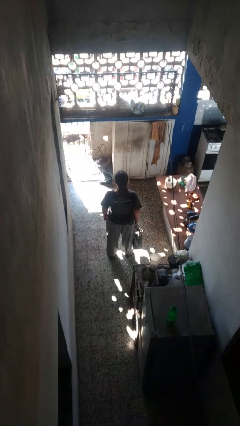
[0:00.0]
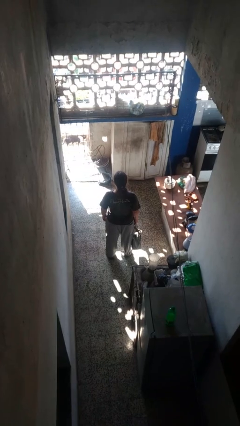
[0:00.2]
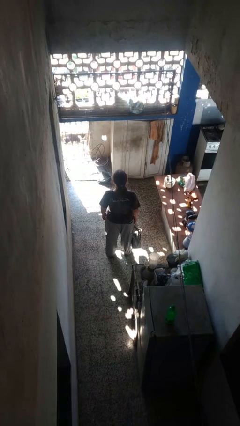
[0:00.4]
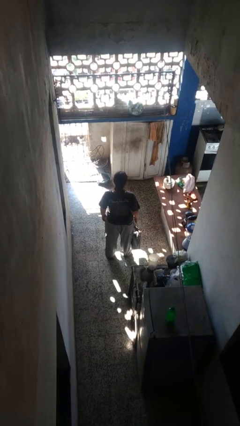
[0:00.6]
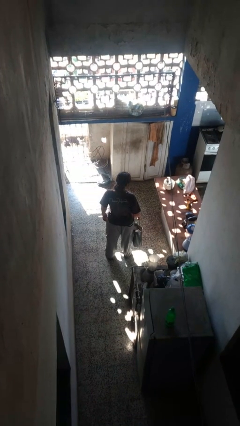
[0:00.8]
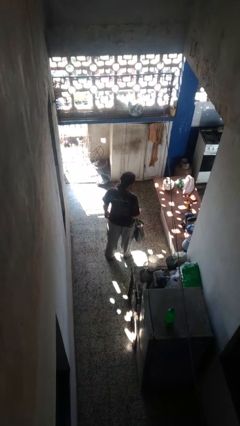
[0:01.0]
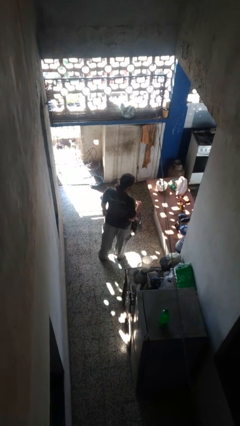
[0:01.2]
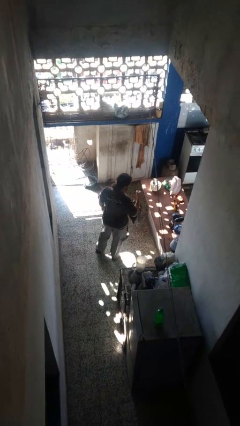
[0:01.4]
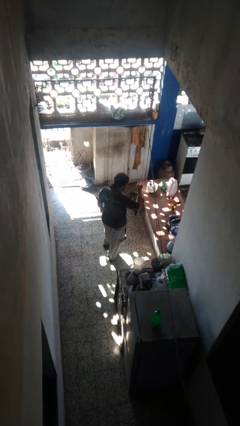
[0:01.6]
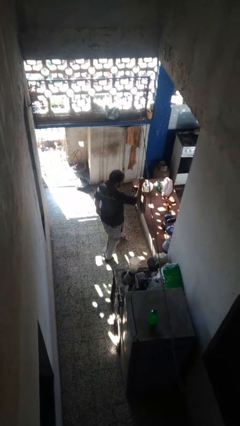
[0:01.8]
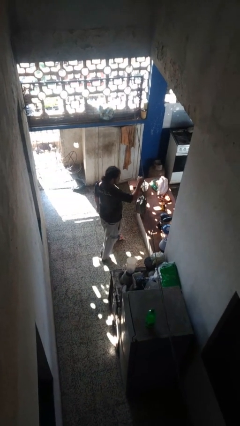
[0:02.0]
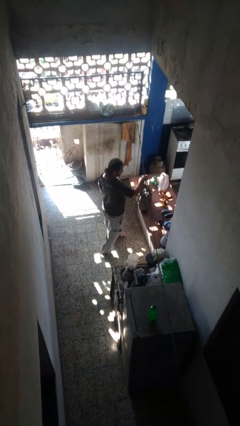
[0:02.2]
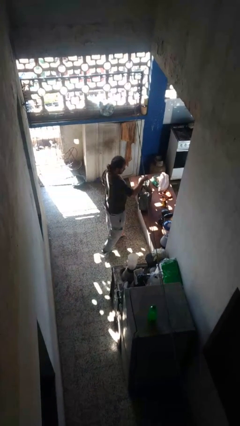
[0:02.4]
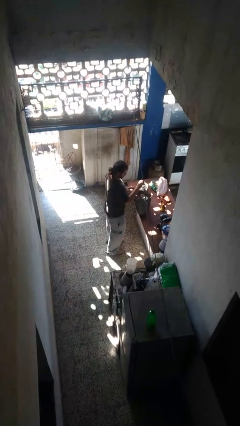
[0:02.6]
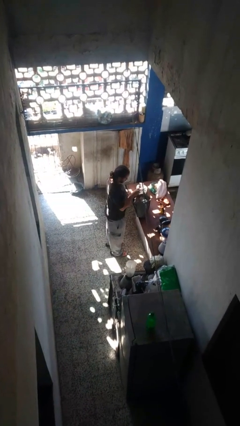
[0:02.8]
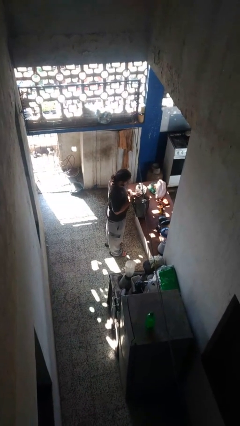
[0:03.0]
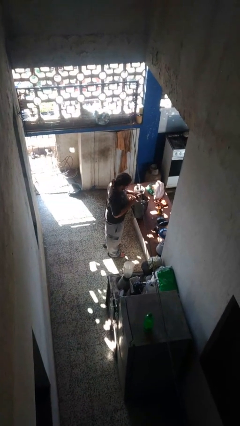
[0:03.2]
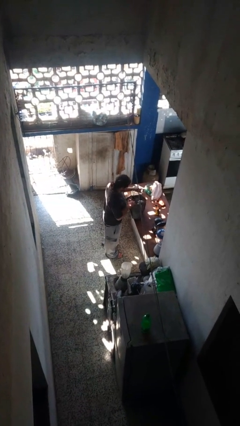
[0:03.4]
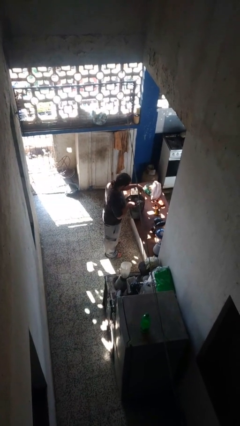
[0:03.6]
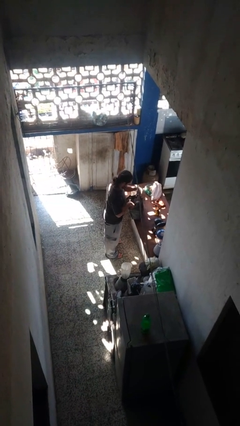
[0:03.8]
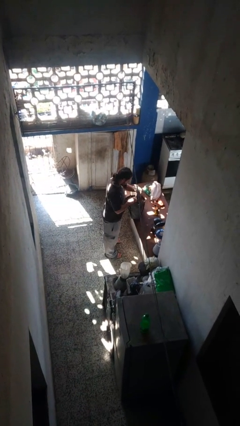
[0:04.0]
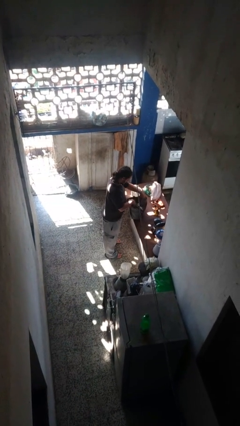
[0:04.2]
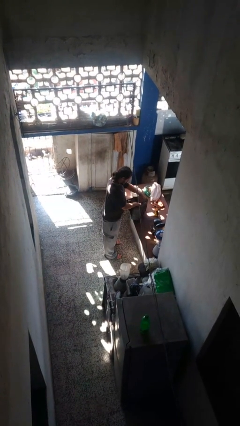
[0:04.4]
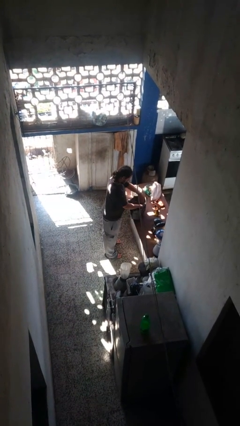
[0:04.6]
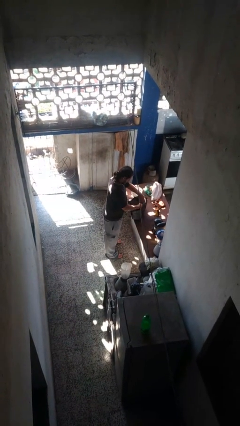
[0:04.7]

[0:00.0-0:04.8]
person searches in purse

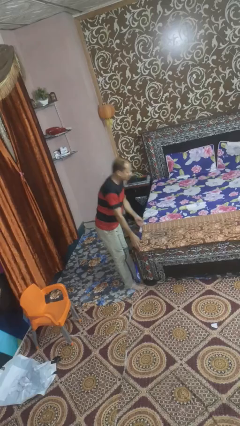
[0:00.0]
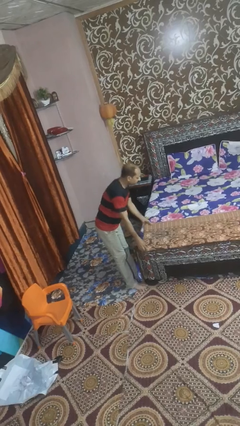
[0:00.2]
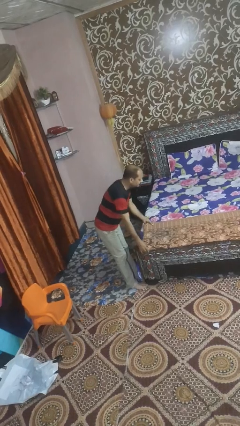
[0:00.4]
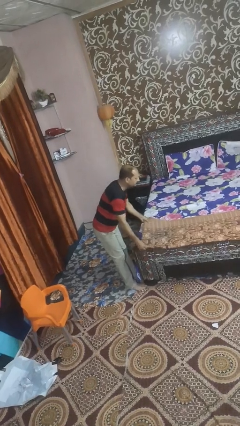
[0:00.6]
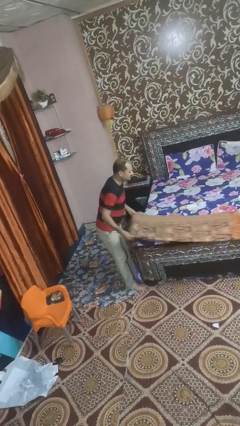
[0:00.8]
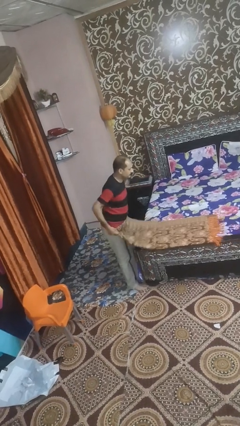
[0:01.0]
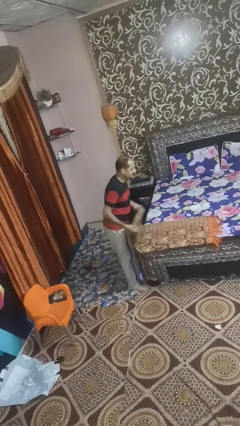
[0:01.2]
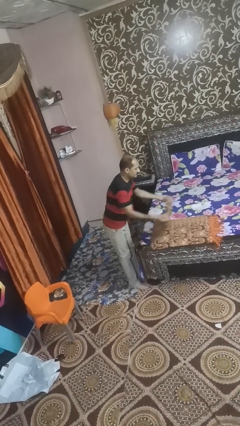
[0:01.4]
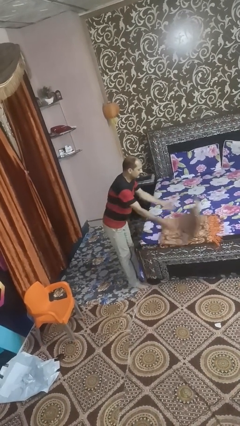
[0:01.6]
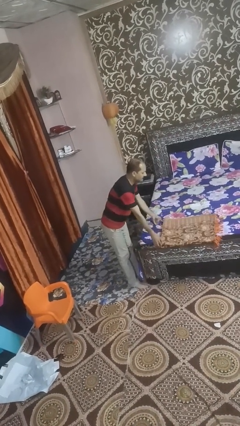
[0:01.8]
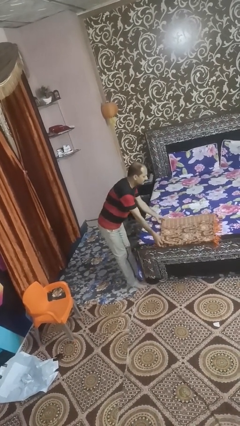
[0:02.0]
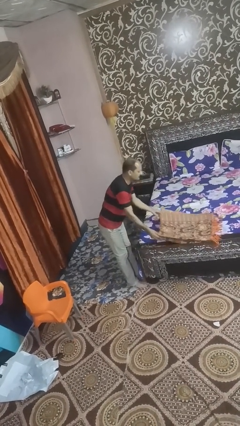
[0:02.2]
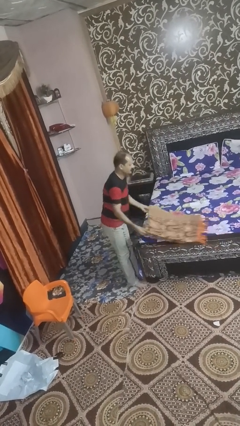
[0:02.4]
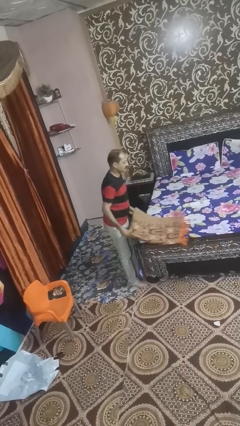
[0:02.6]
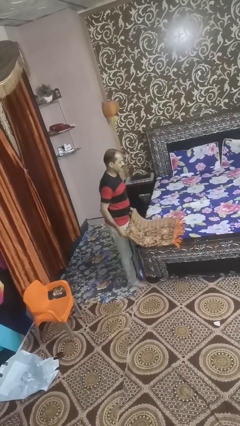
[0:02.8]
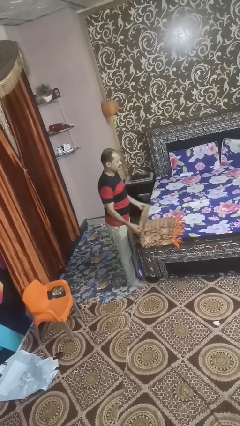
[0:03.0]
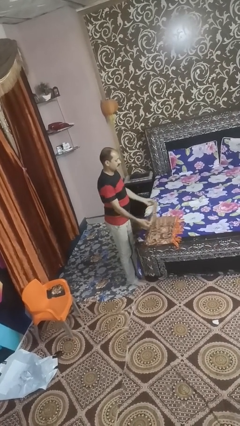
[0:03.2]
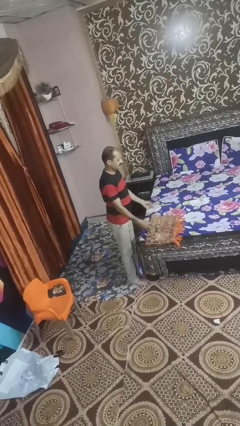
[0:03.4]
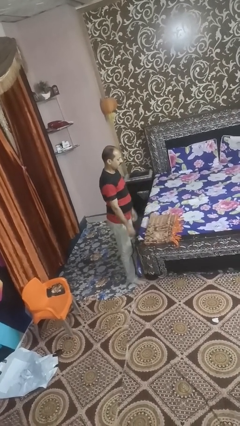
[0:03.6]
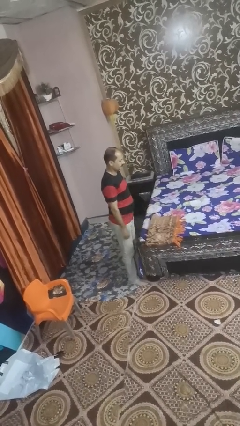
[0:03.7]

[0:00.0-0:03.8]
person folds blanket

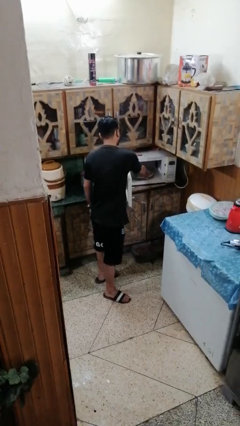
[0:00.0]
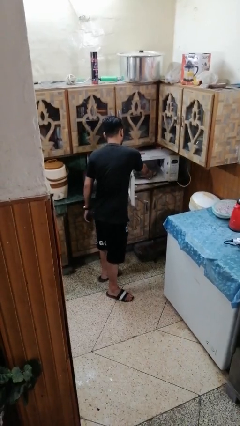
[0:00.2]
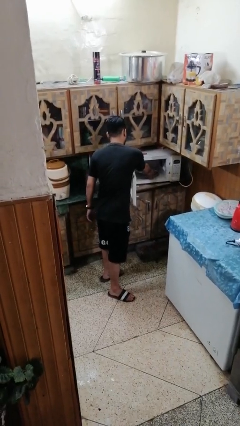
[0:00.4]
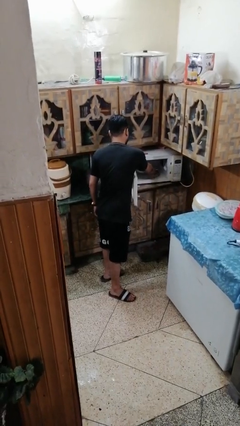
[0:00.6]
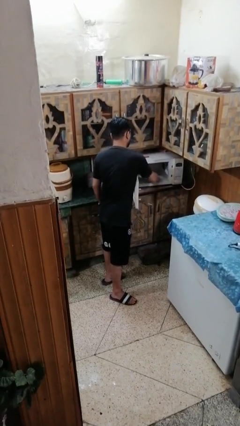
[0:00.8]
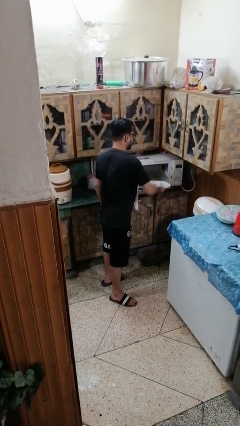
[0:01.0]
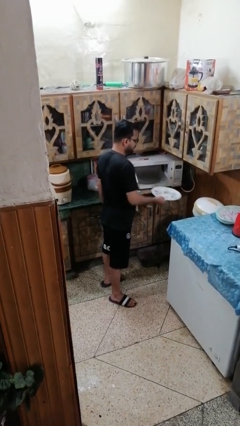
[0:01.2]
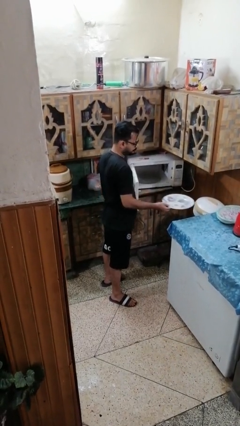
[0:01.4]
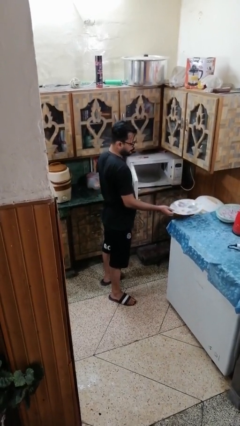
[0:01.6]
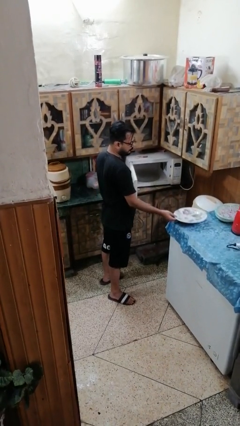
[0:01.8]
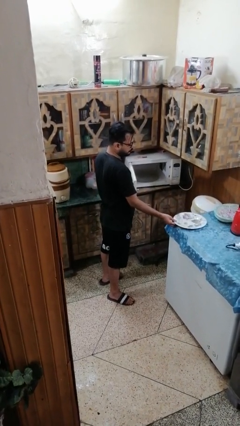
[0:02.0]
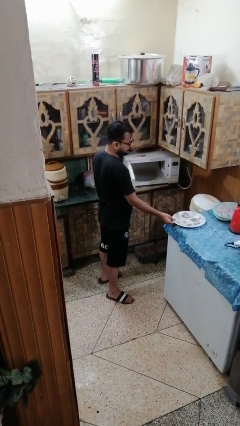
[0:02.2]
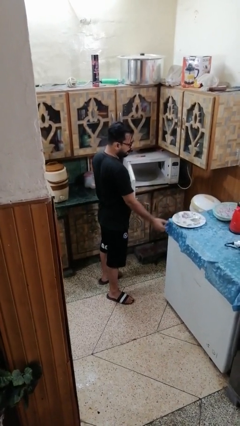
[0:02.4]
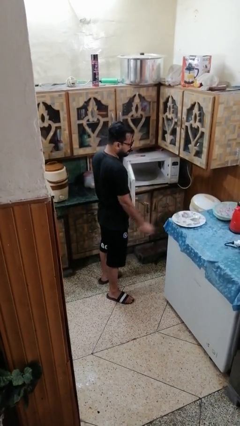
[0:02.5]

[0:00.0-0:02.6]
person takes object from microwave

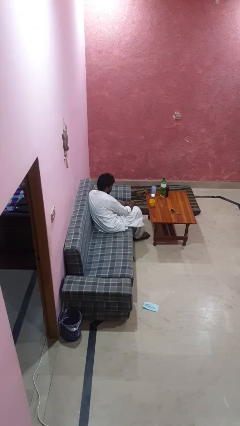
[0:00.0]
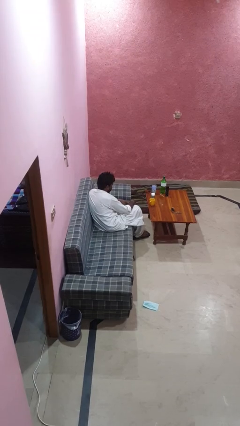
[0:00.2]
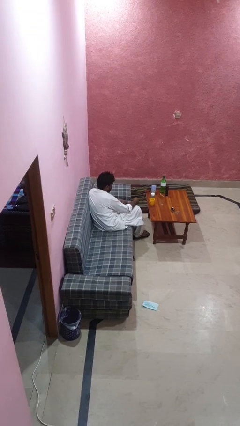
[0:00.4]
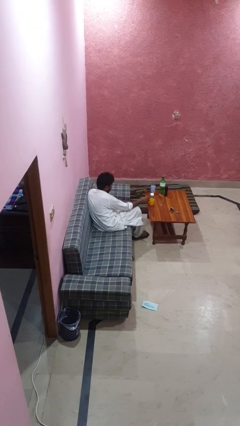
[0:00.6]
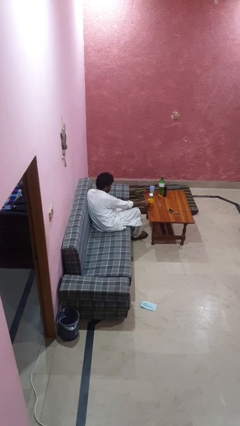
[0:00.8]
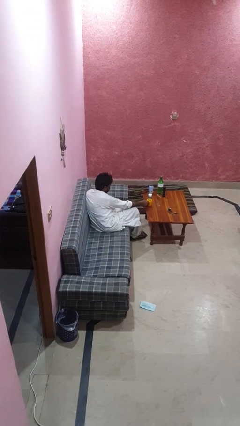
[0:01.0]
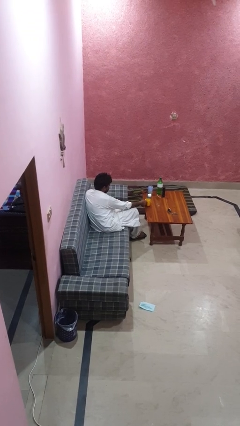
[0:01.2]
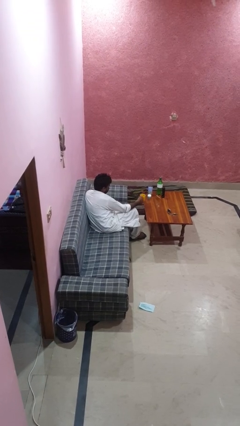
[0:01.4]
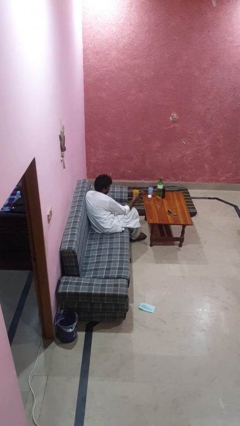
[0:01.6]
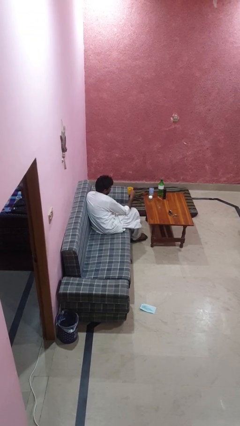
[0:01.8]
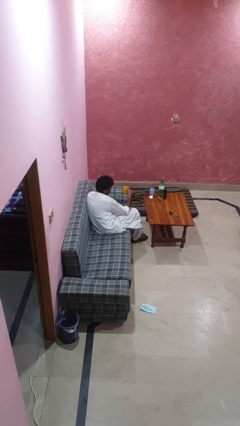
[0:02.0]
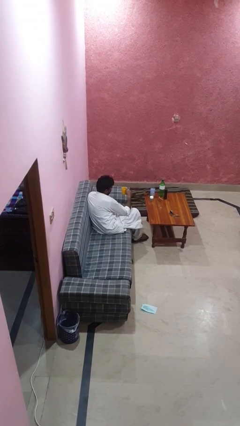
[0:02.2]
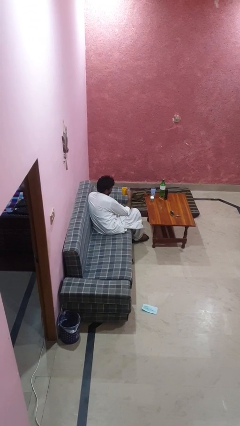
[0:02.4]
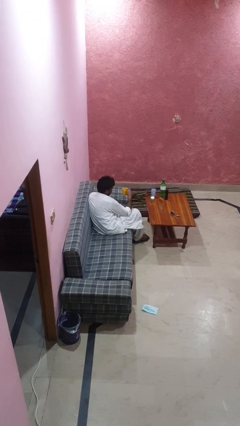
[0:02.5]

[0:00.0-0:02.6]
person picks up object from table

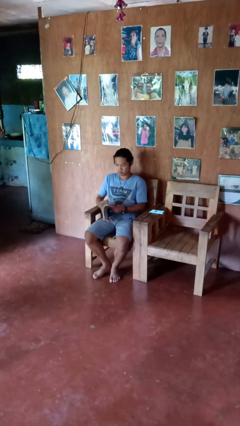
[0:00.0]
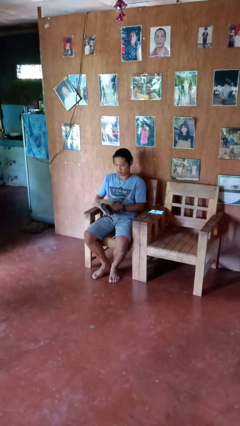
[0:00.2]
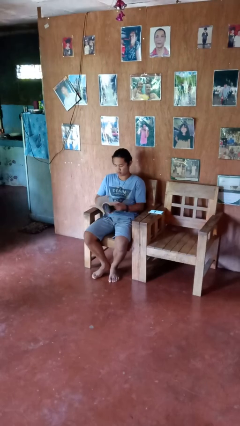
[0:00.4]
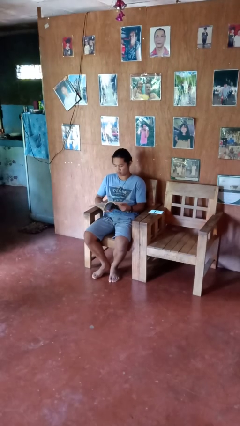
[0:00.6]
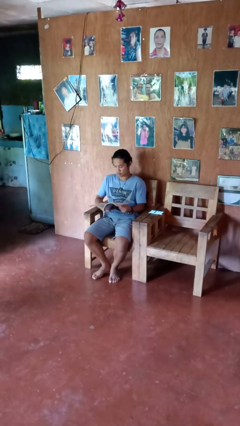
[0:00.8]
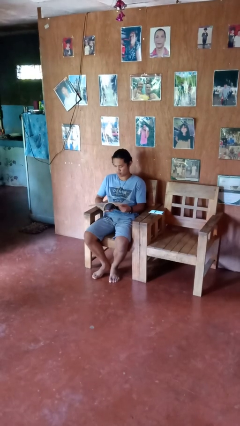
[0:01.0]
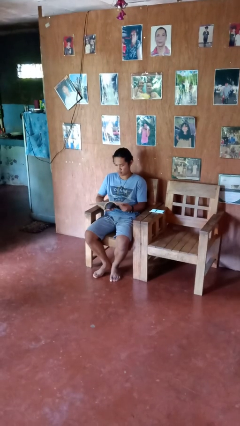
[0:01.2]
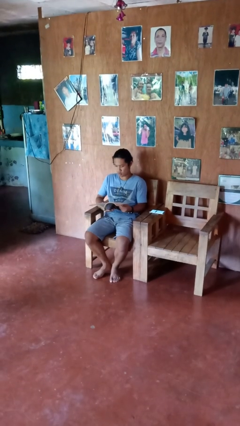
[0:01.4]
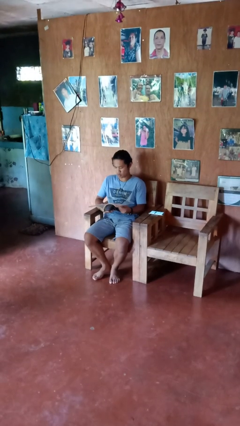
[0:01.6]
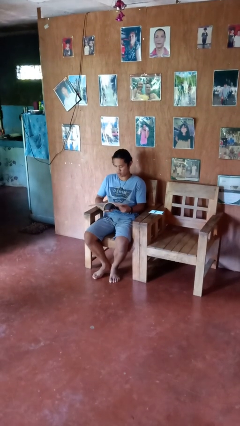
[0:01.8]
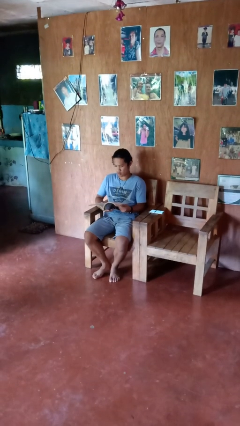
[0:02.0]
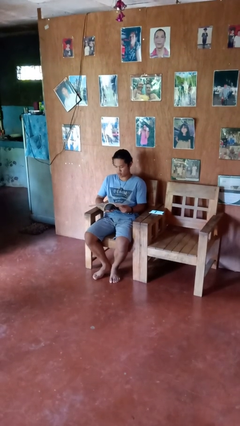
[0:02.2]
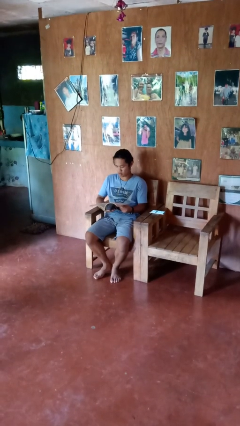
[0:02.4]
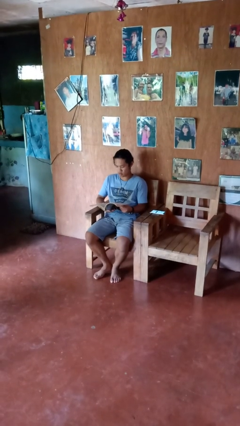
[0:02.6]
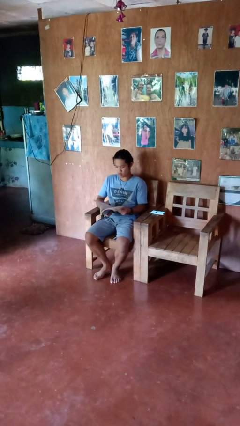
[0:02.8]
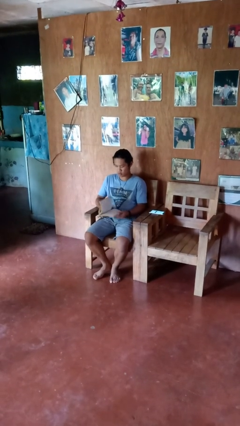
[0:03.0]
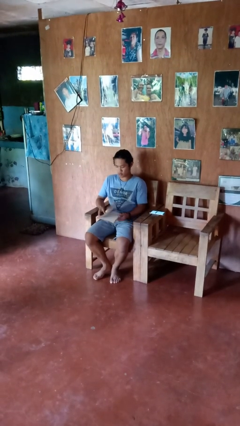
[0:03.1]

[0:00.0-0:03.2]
person reads book
